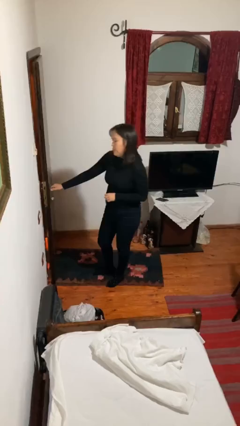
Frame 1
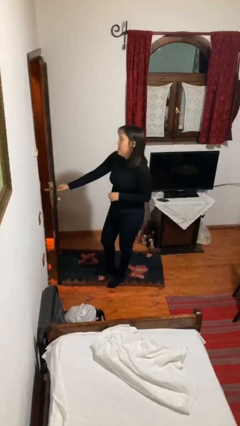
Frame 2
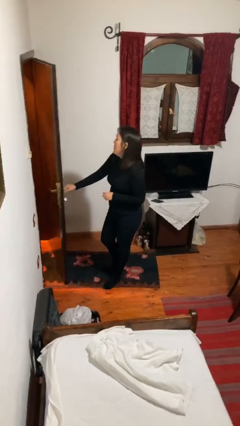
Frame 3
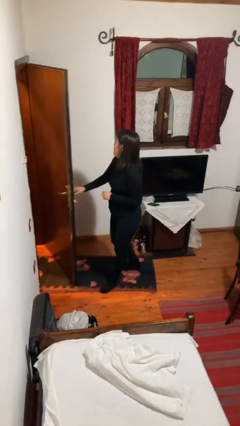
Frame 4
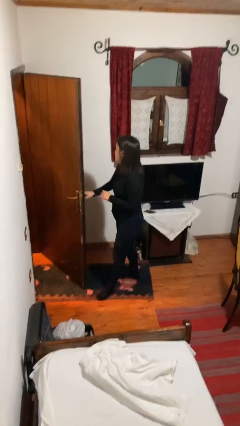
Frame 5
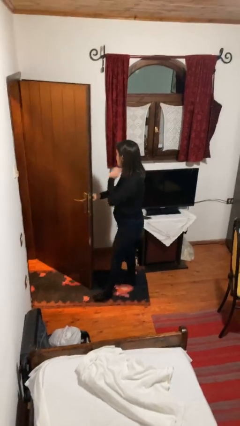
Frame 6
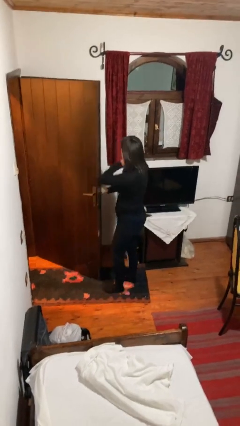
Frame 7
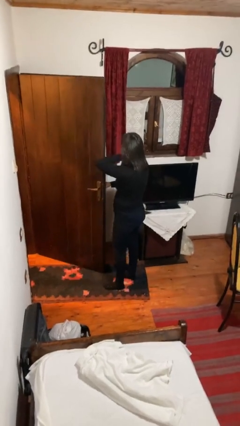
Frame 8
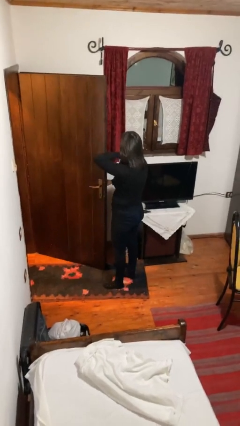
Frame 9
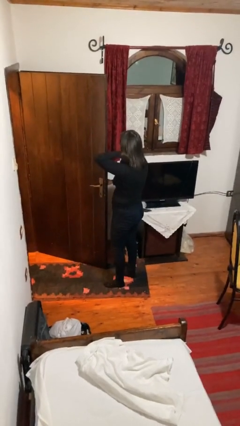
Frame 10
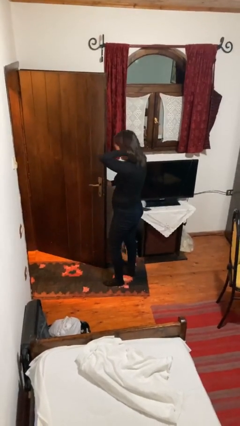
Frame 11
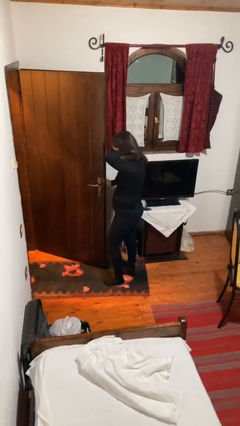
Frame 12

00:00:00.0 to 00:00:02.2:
person opens facility door

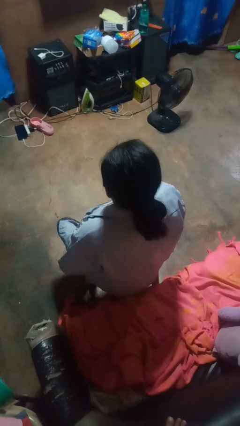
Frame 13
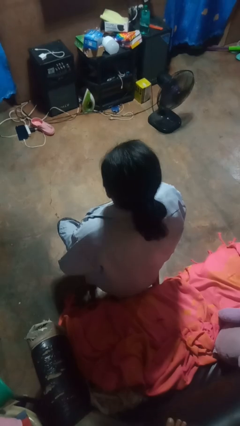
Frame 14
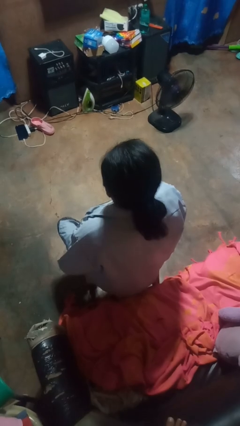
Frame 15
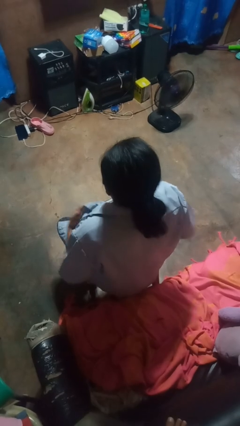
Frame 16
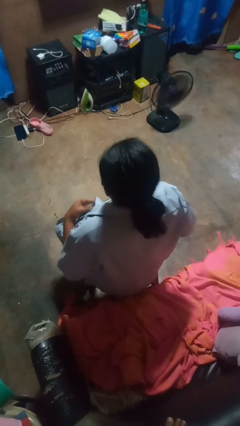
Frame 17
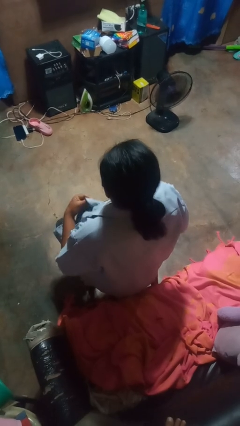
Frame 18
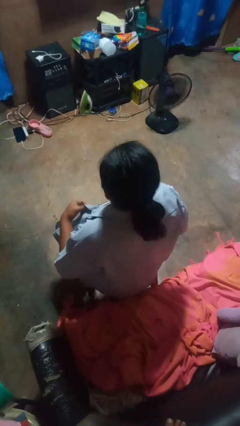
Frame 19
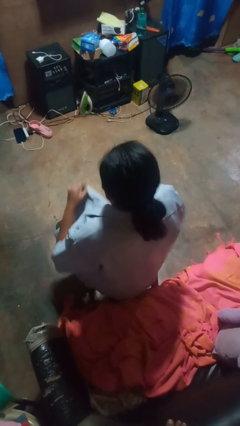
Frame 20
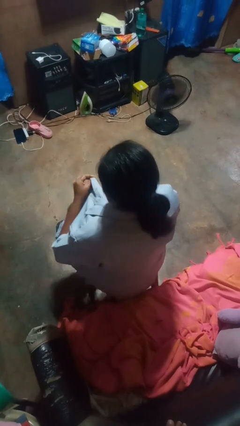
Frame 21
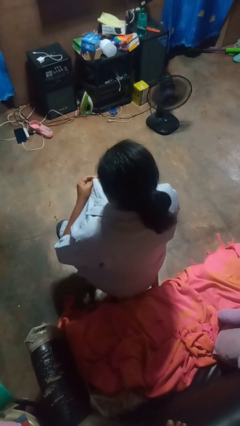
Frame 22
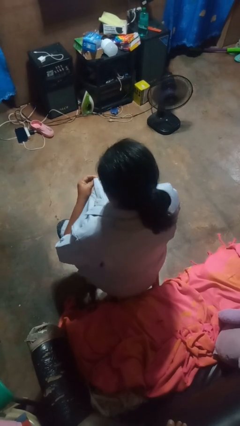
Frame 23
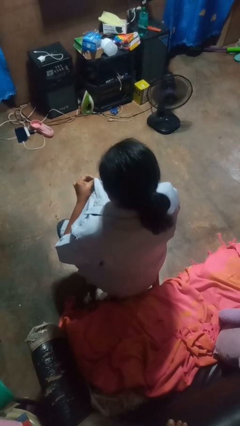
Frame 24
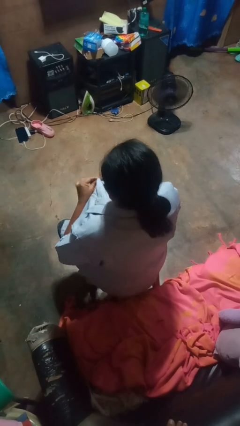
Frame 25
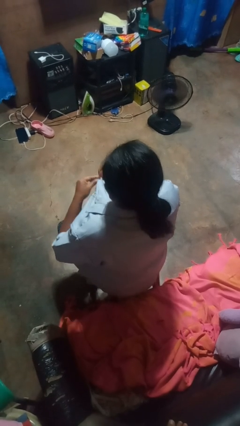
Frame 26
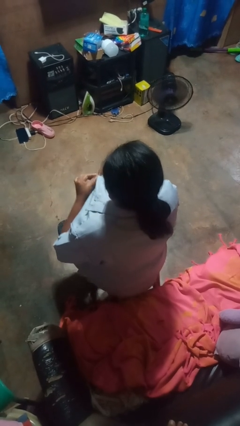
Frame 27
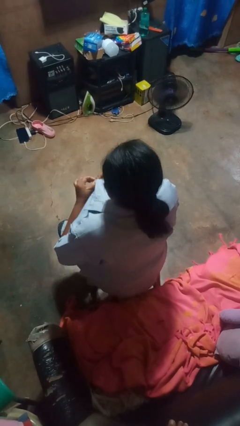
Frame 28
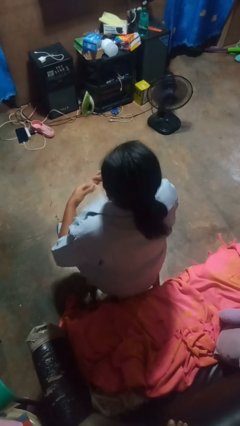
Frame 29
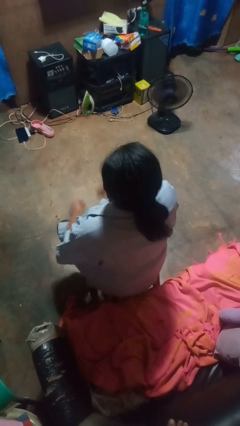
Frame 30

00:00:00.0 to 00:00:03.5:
person buttons shirt

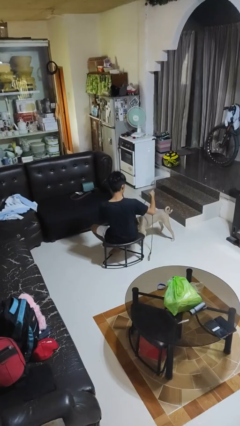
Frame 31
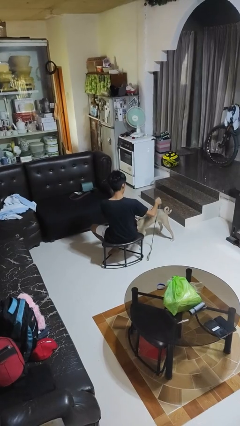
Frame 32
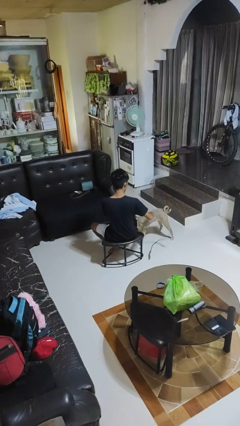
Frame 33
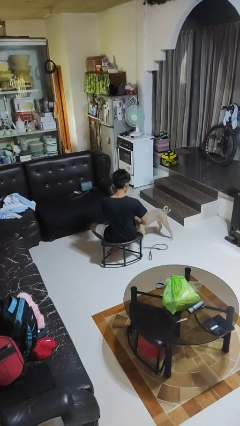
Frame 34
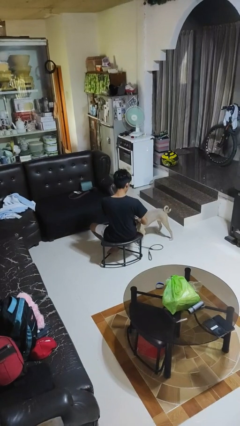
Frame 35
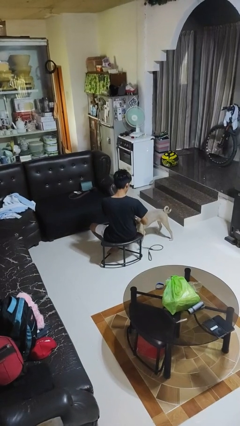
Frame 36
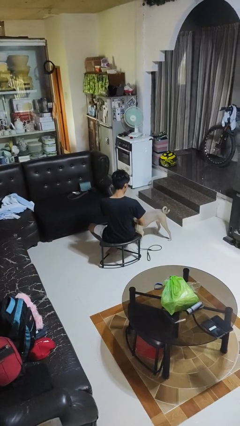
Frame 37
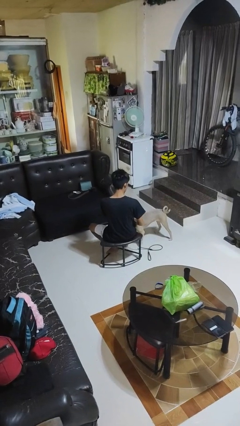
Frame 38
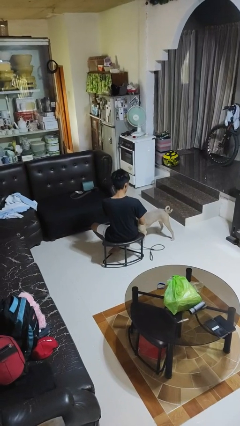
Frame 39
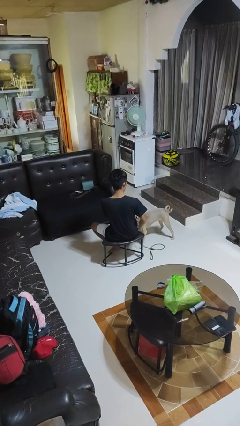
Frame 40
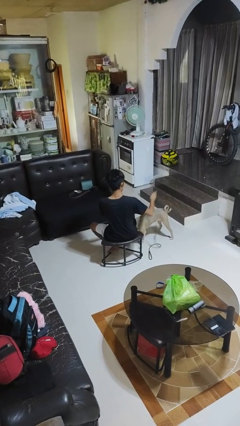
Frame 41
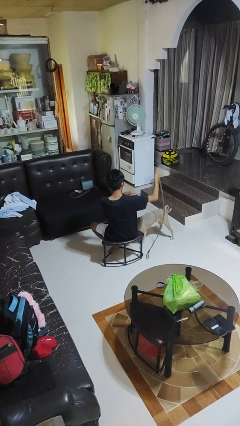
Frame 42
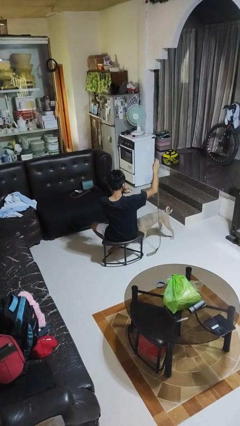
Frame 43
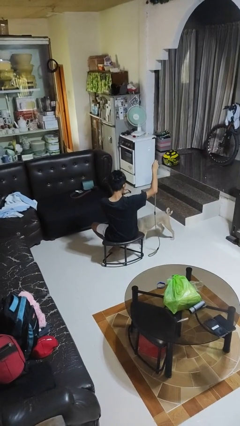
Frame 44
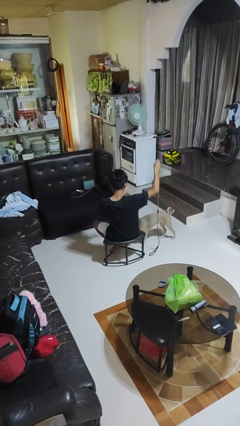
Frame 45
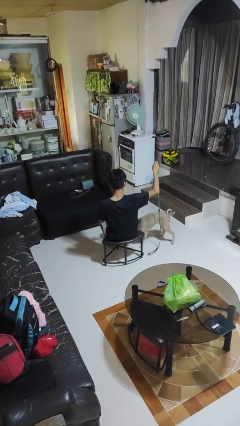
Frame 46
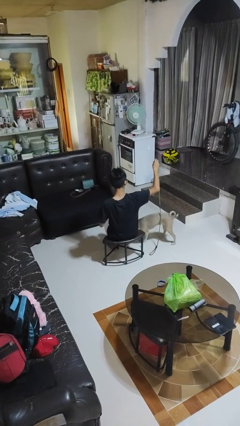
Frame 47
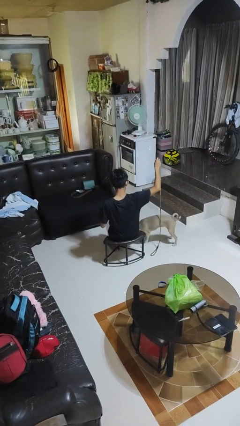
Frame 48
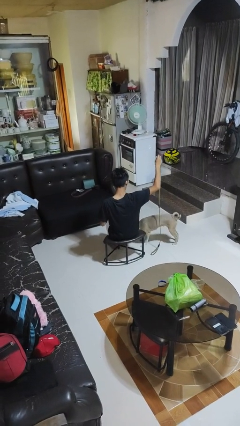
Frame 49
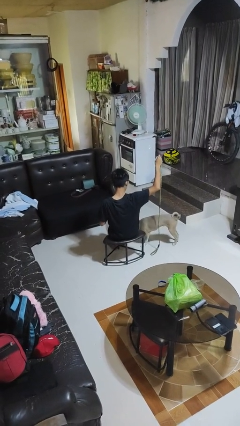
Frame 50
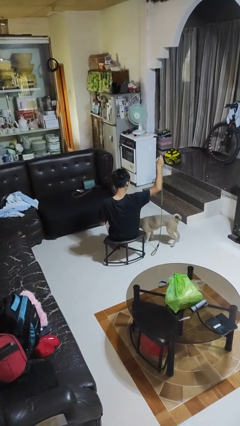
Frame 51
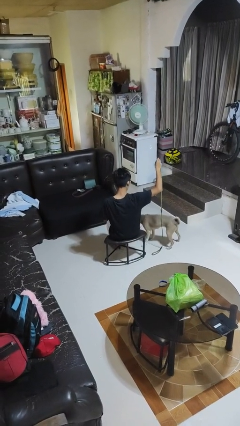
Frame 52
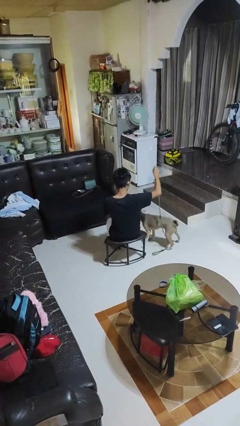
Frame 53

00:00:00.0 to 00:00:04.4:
person unattaches leash from dog

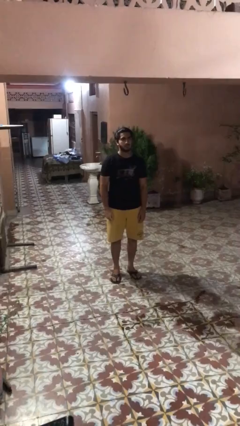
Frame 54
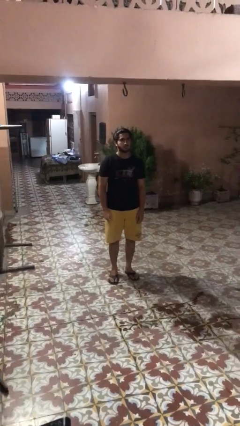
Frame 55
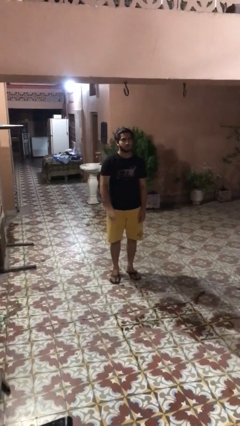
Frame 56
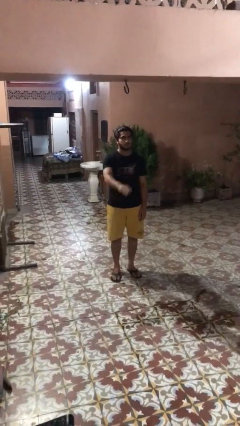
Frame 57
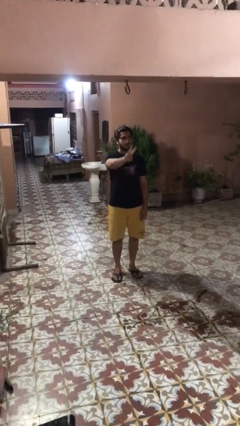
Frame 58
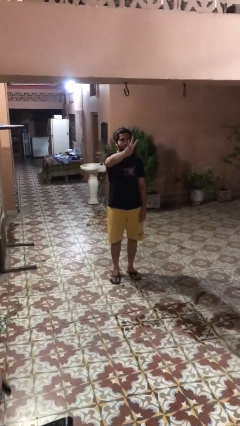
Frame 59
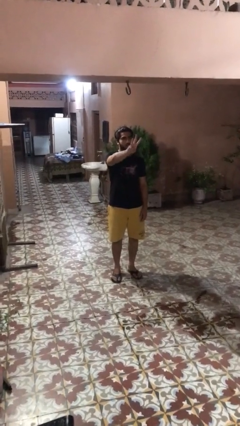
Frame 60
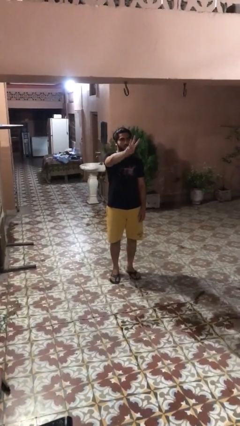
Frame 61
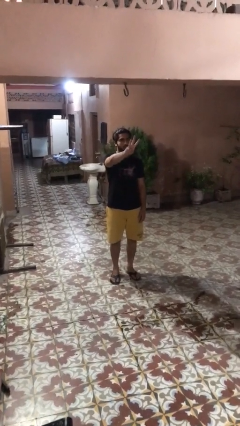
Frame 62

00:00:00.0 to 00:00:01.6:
person gestures number three

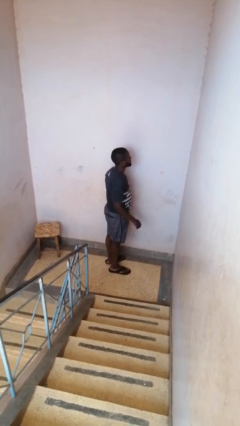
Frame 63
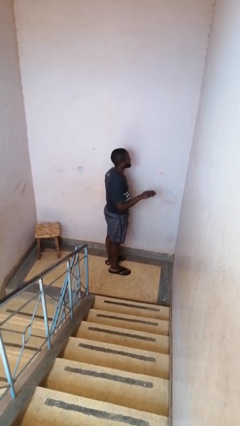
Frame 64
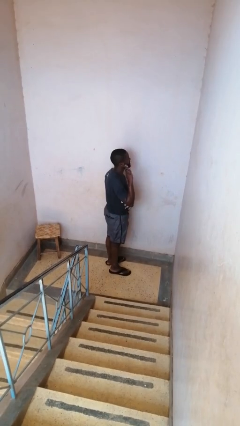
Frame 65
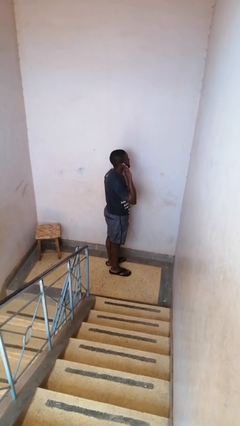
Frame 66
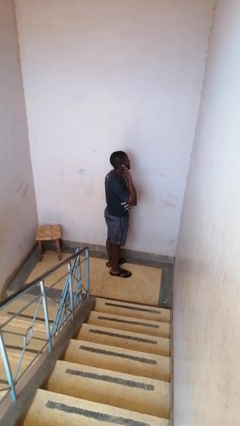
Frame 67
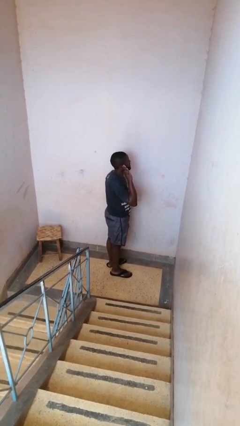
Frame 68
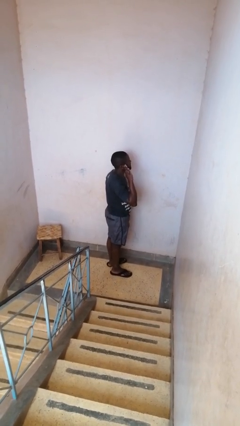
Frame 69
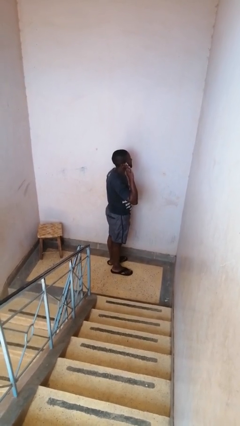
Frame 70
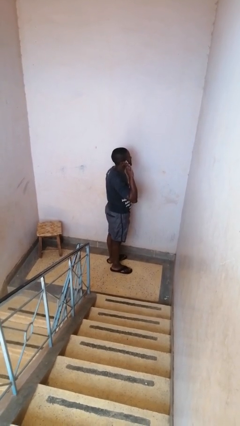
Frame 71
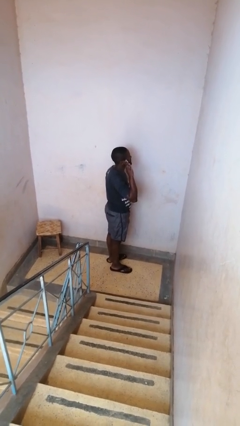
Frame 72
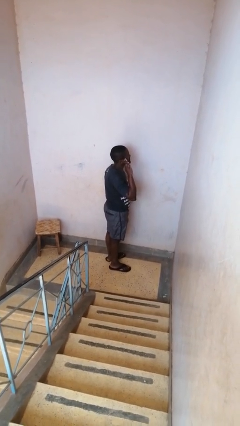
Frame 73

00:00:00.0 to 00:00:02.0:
person salutes

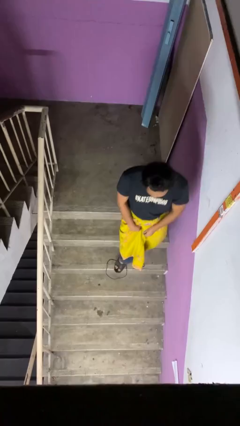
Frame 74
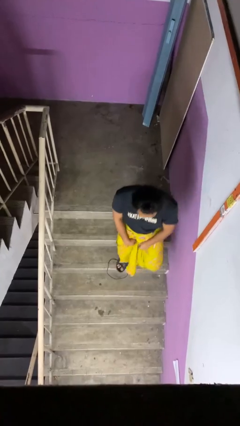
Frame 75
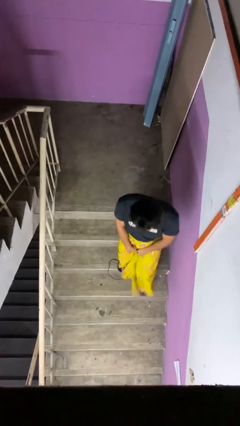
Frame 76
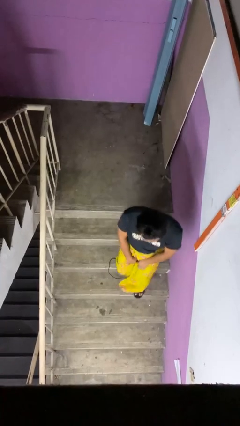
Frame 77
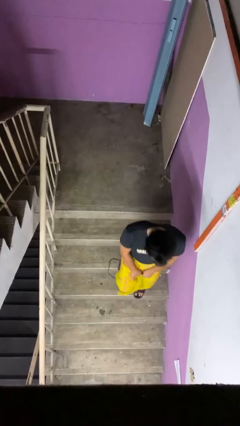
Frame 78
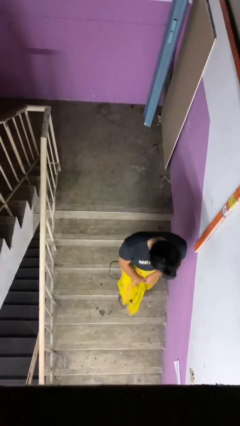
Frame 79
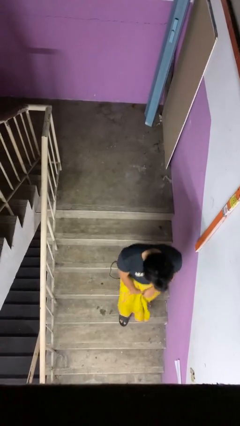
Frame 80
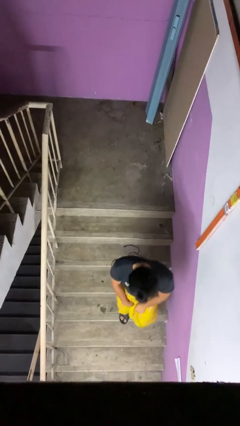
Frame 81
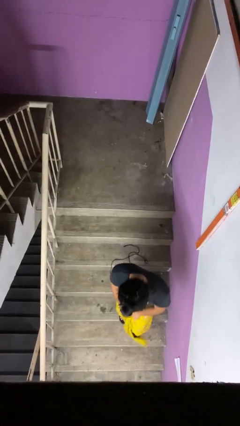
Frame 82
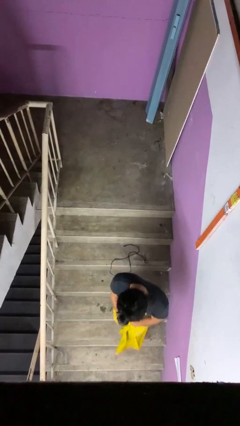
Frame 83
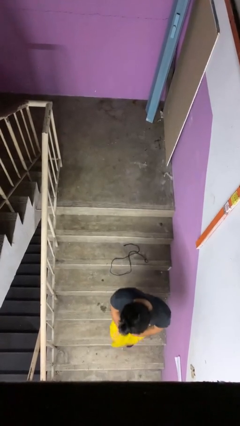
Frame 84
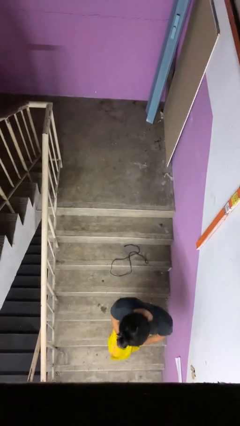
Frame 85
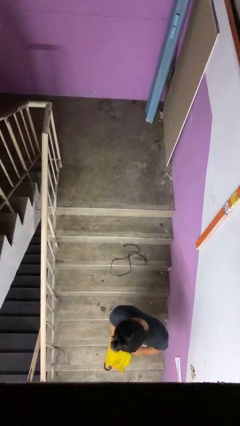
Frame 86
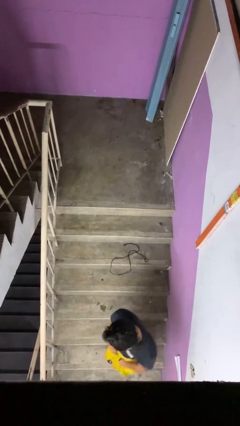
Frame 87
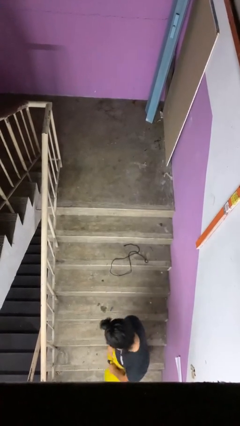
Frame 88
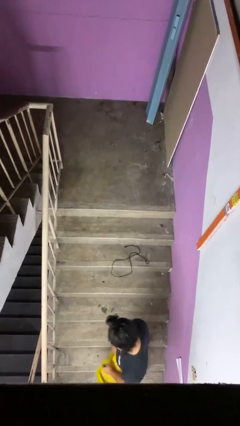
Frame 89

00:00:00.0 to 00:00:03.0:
person climbs down stairs

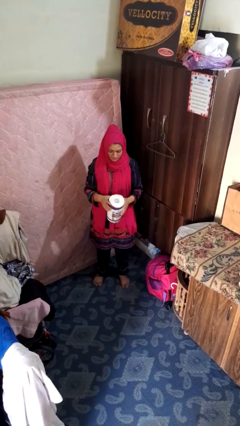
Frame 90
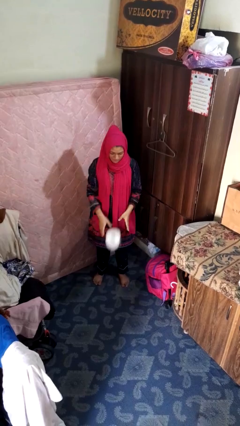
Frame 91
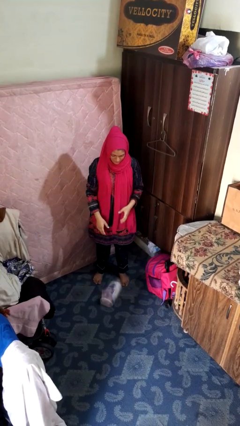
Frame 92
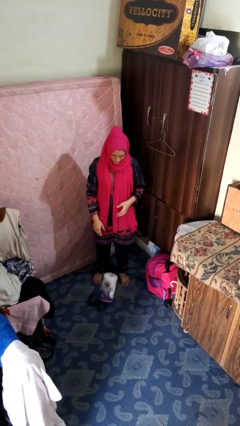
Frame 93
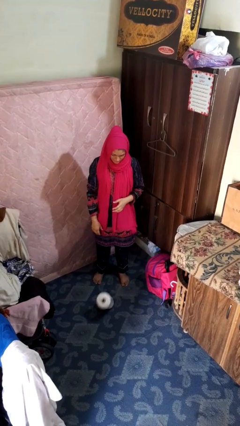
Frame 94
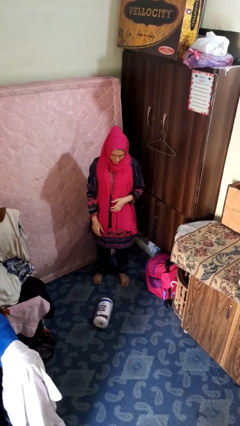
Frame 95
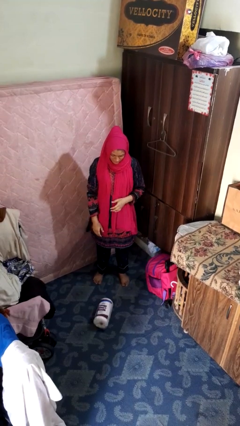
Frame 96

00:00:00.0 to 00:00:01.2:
person picks up object from floor
